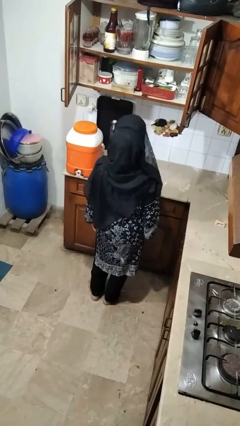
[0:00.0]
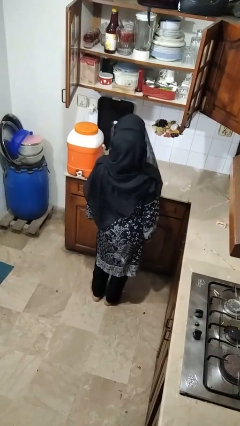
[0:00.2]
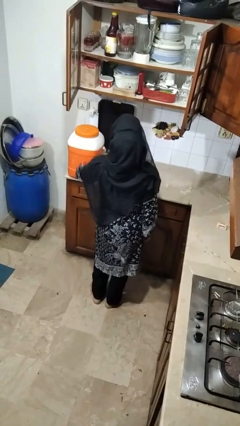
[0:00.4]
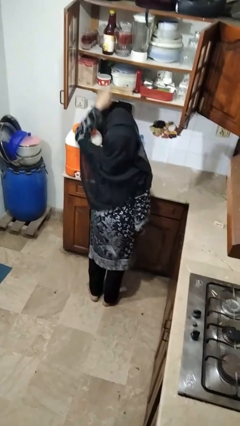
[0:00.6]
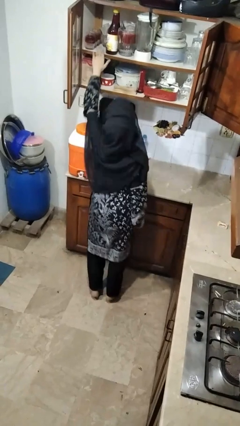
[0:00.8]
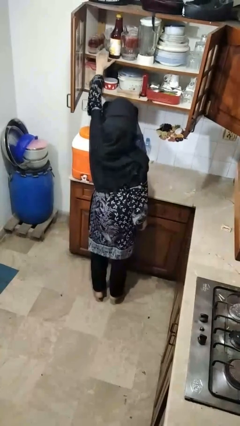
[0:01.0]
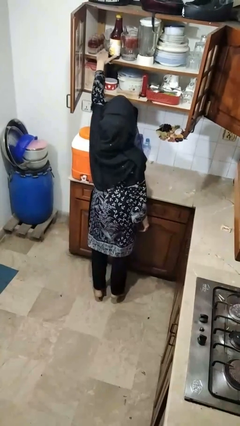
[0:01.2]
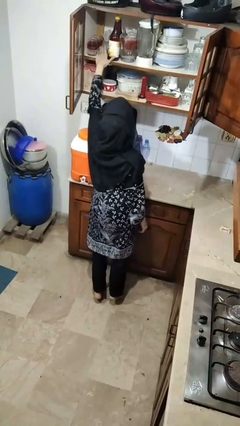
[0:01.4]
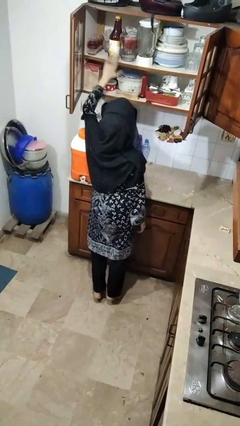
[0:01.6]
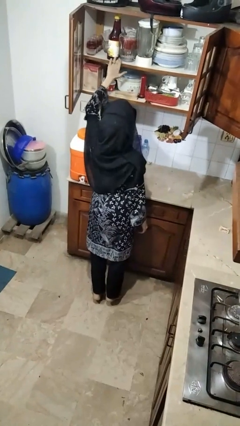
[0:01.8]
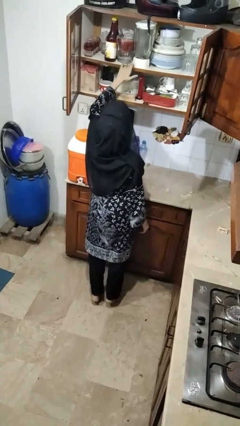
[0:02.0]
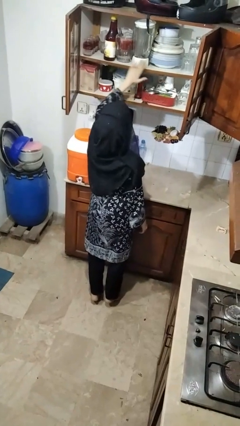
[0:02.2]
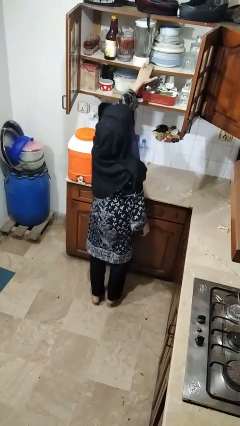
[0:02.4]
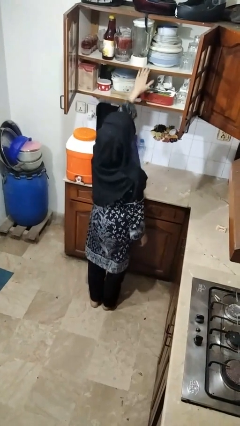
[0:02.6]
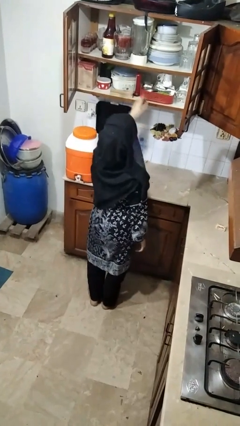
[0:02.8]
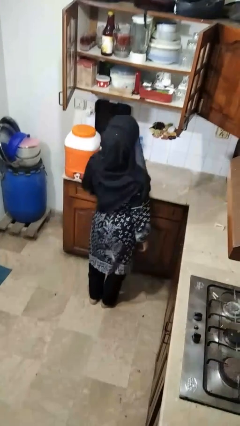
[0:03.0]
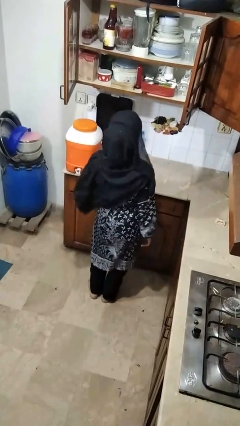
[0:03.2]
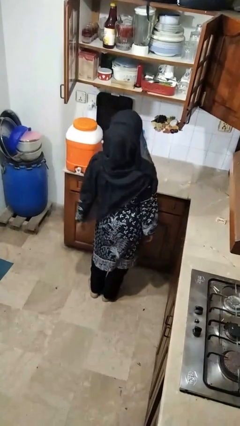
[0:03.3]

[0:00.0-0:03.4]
person searches in cabinet

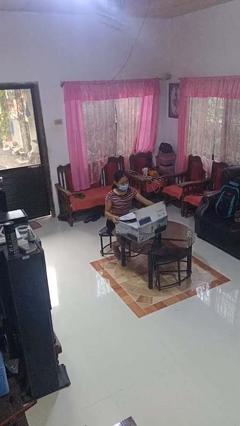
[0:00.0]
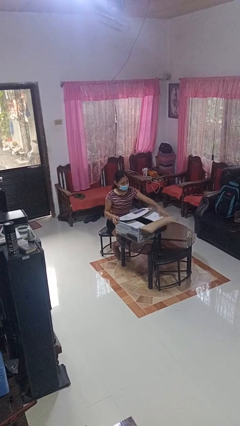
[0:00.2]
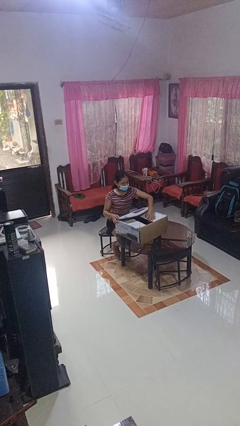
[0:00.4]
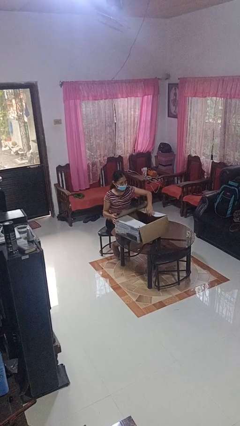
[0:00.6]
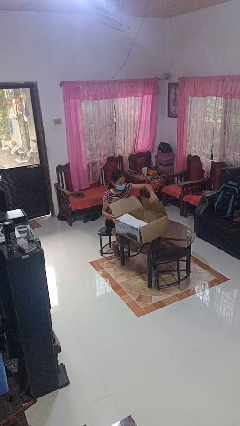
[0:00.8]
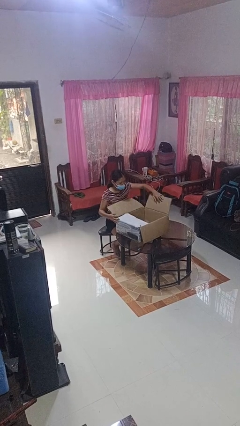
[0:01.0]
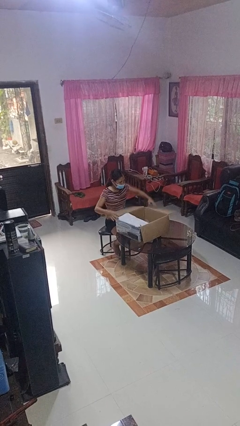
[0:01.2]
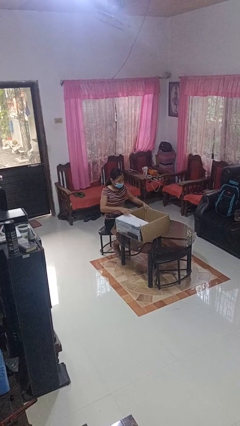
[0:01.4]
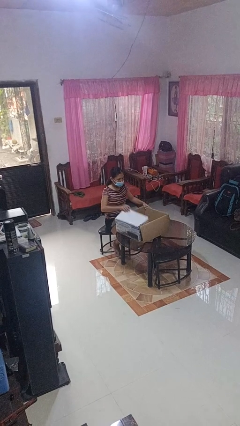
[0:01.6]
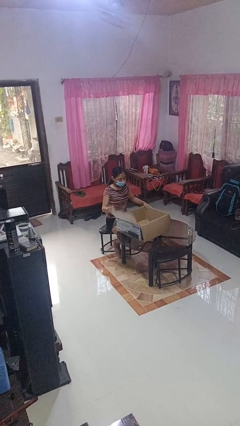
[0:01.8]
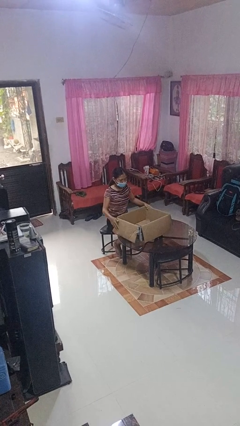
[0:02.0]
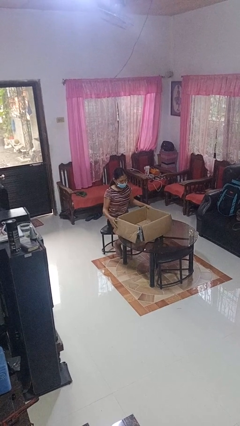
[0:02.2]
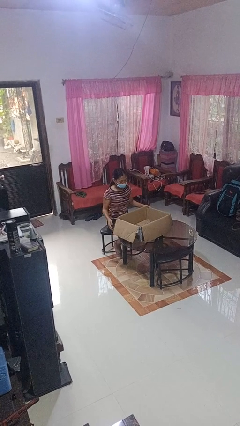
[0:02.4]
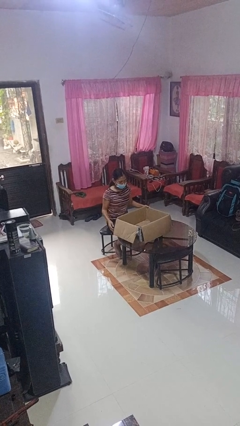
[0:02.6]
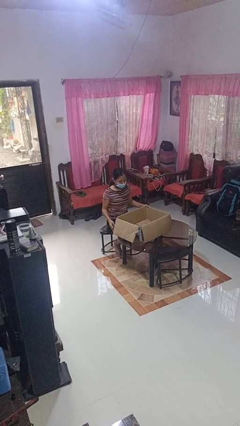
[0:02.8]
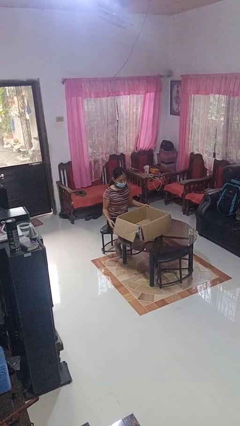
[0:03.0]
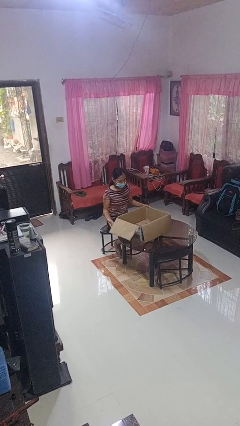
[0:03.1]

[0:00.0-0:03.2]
person opens box

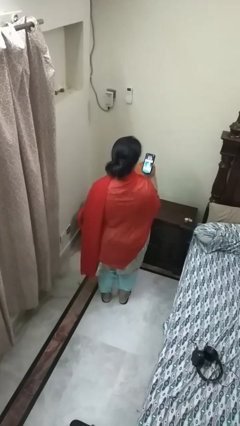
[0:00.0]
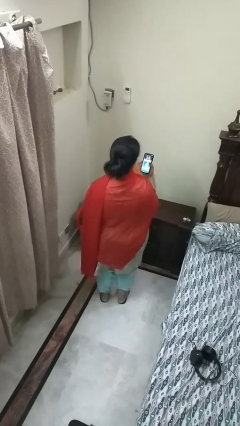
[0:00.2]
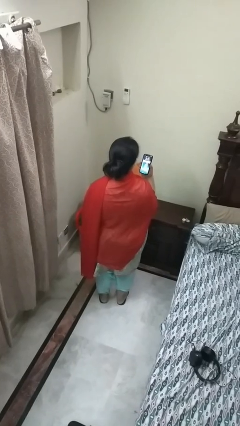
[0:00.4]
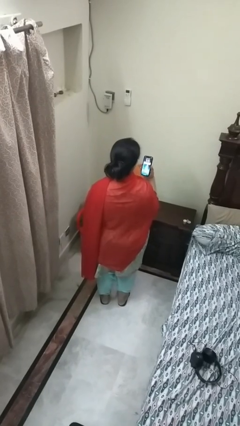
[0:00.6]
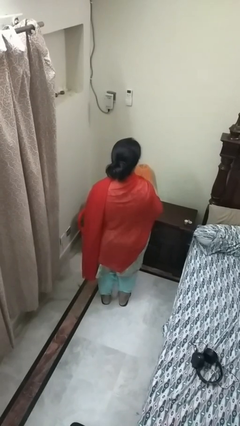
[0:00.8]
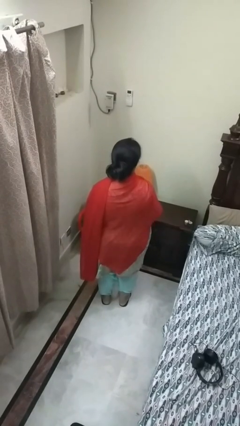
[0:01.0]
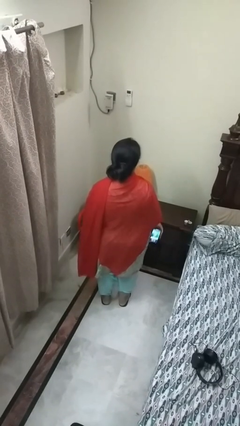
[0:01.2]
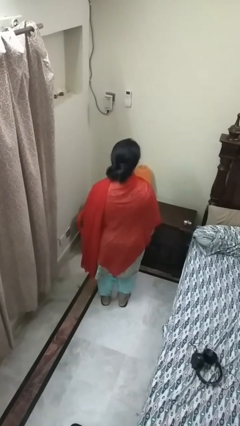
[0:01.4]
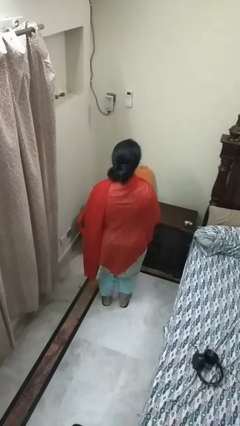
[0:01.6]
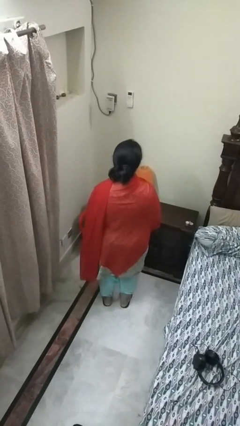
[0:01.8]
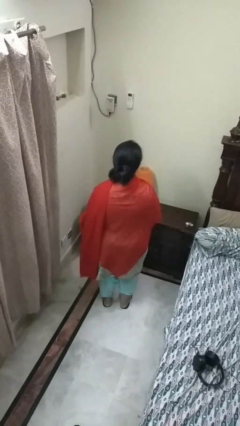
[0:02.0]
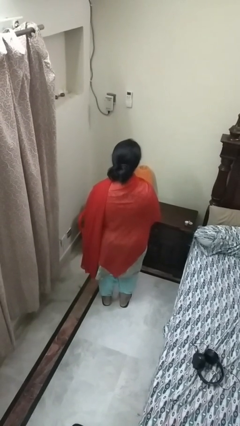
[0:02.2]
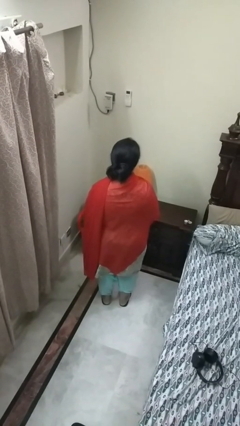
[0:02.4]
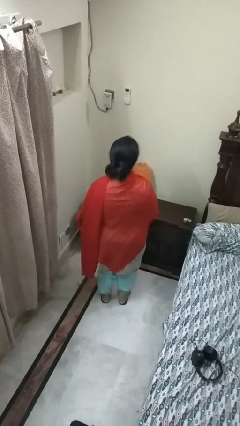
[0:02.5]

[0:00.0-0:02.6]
person puts phone into pocket

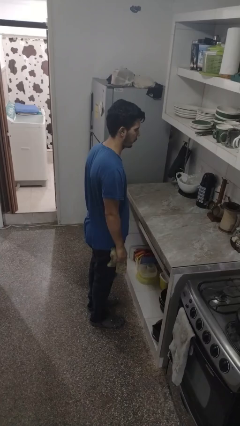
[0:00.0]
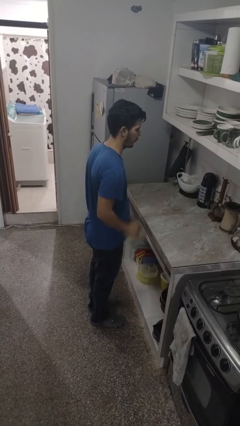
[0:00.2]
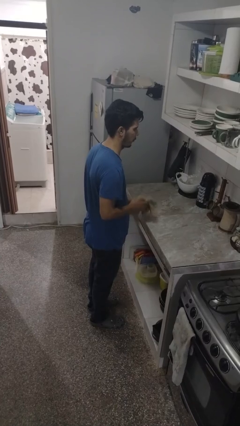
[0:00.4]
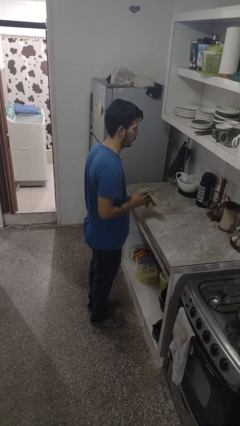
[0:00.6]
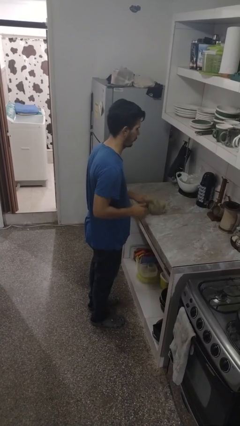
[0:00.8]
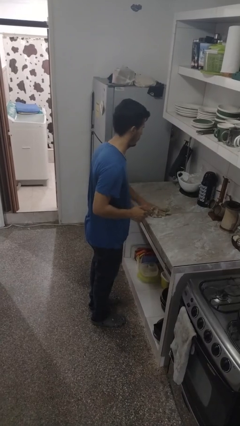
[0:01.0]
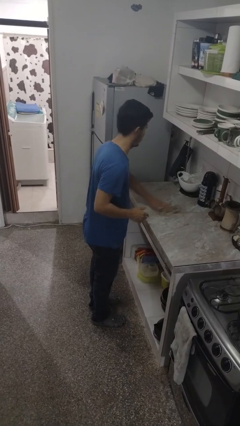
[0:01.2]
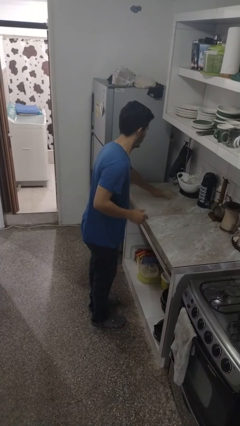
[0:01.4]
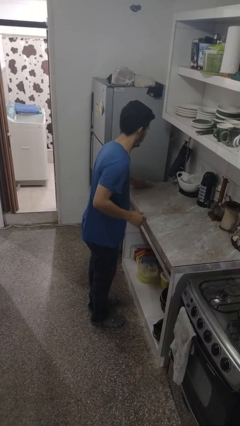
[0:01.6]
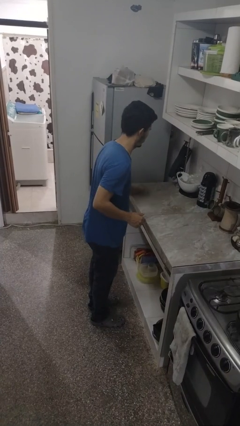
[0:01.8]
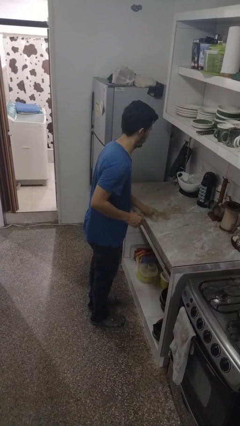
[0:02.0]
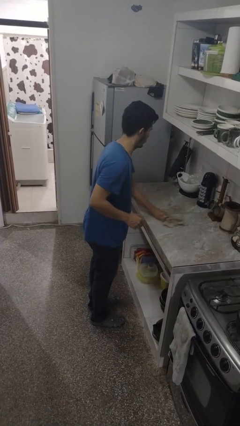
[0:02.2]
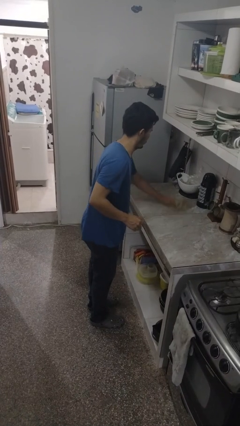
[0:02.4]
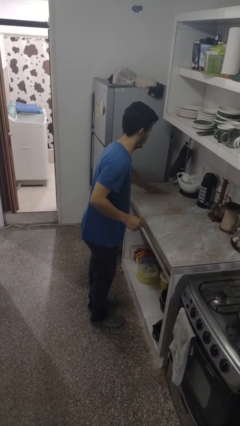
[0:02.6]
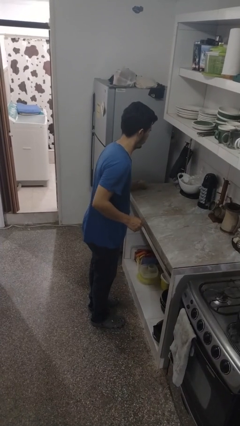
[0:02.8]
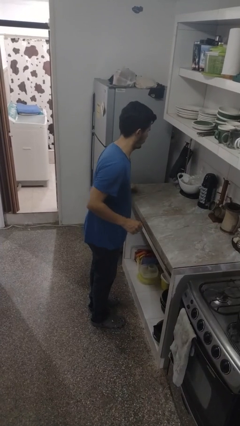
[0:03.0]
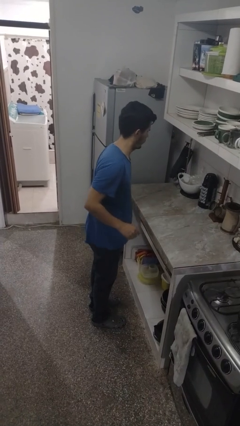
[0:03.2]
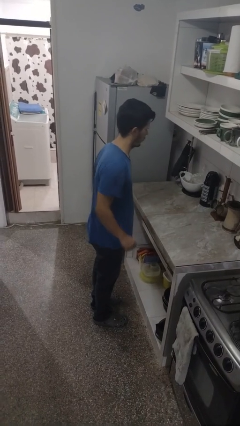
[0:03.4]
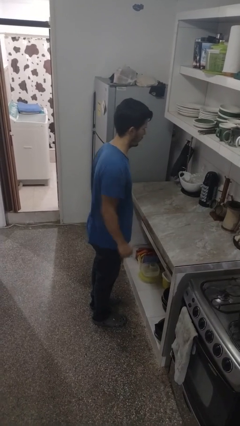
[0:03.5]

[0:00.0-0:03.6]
person cleans table with rag

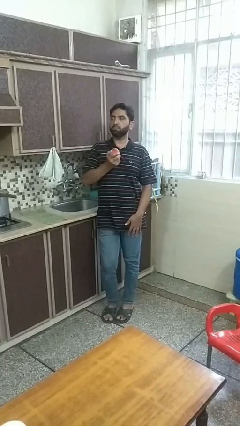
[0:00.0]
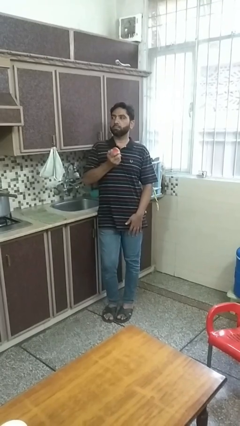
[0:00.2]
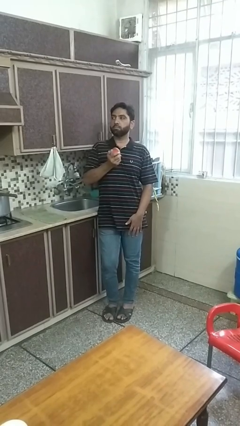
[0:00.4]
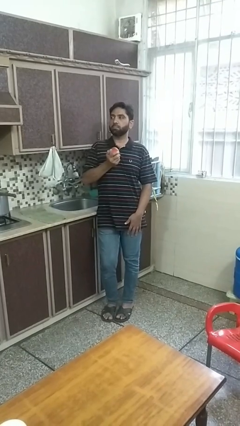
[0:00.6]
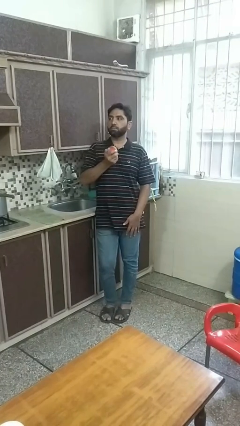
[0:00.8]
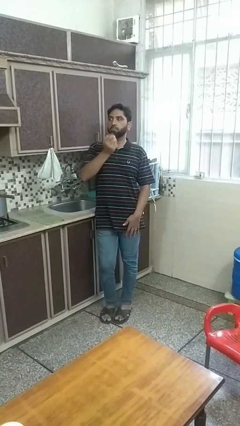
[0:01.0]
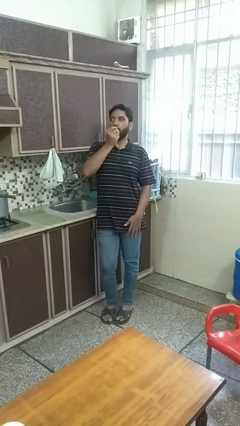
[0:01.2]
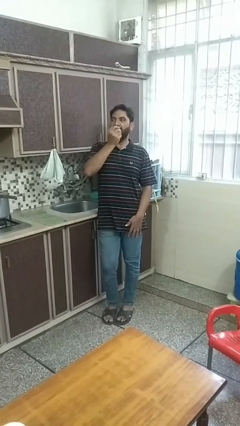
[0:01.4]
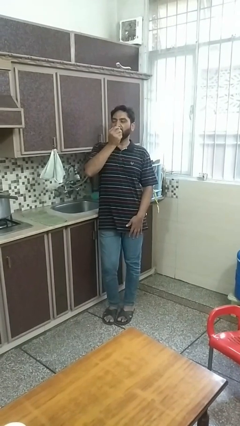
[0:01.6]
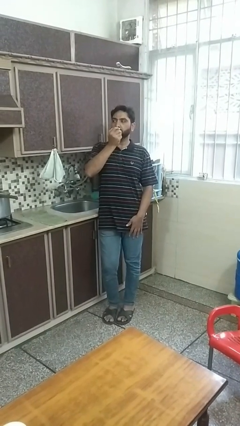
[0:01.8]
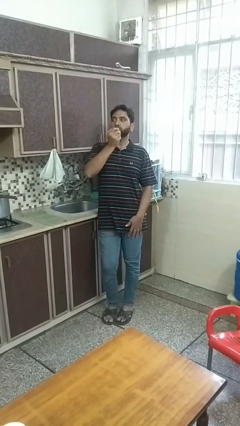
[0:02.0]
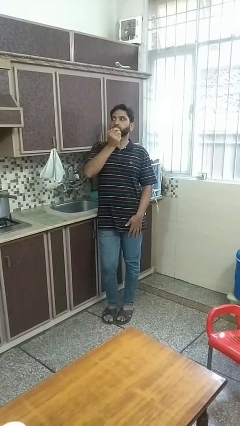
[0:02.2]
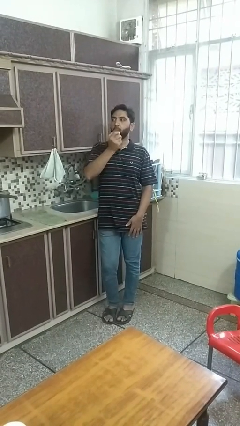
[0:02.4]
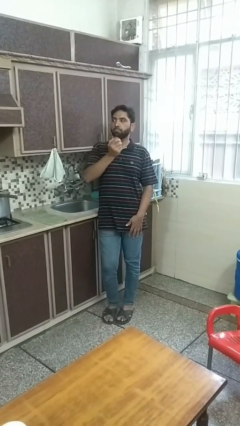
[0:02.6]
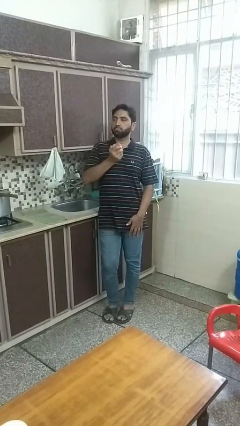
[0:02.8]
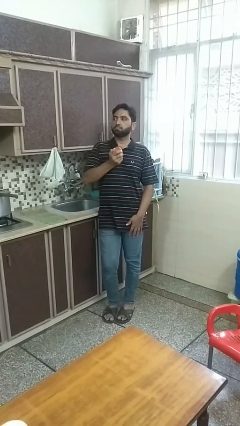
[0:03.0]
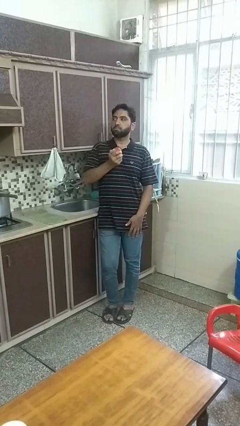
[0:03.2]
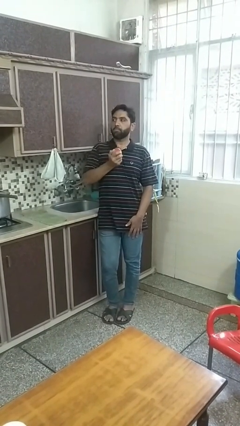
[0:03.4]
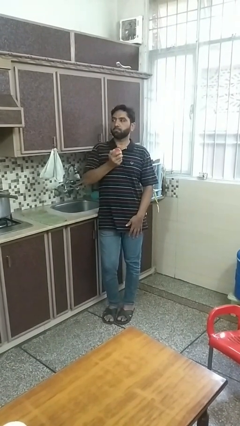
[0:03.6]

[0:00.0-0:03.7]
person eats apple

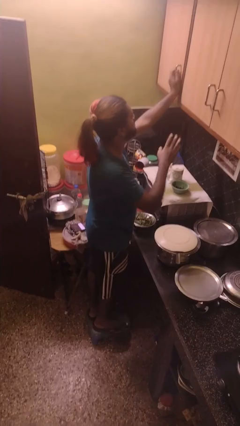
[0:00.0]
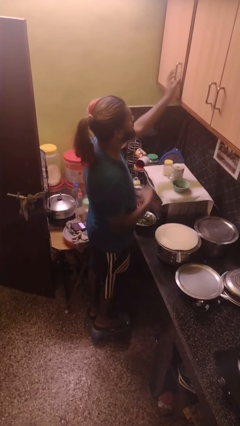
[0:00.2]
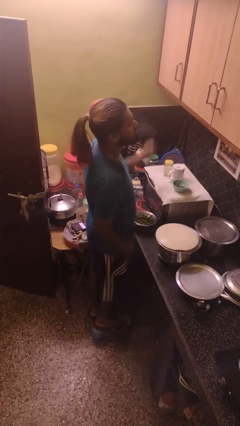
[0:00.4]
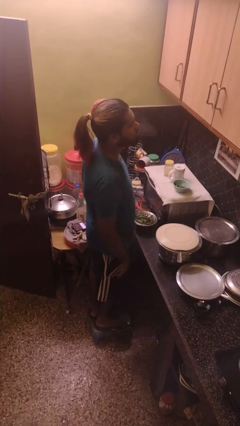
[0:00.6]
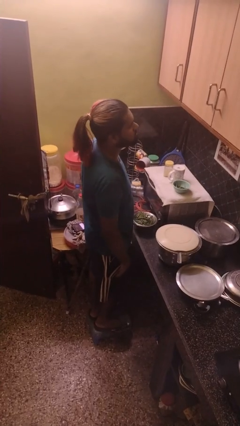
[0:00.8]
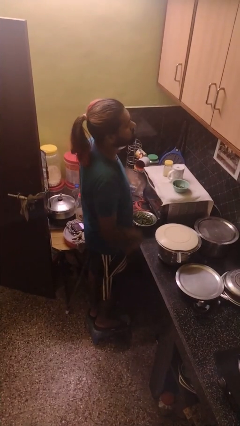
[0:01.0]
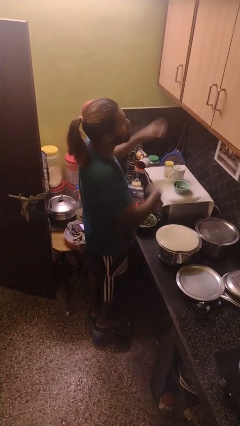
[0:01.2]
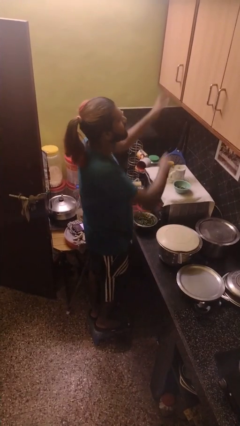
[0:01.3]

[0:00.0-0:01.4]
person closes cabinet
